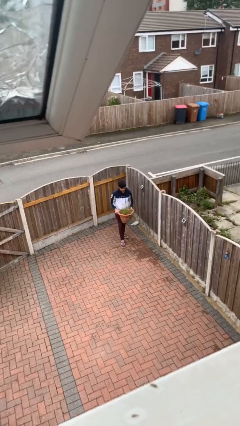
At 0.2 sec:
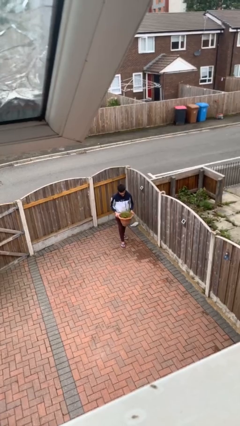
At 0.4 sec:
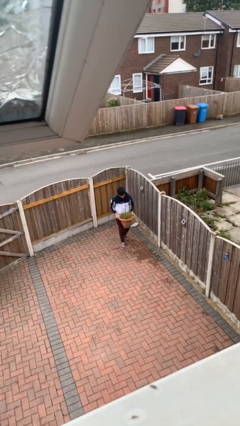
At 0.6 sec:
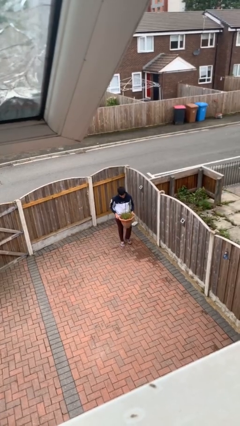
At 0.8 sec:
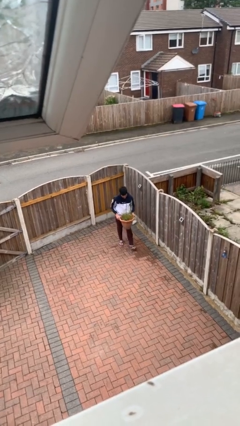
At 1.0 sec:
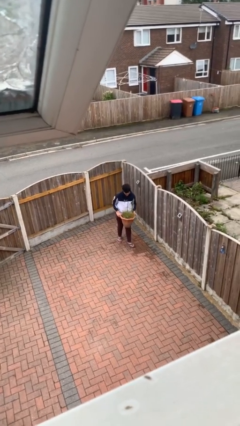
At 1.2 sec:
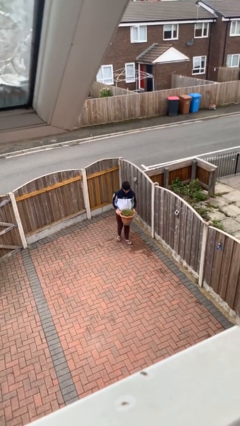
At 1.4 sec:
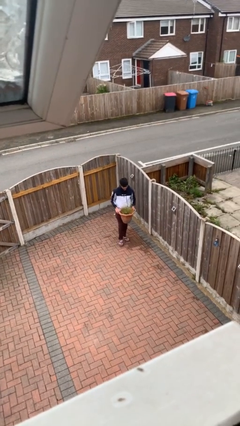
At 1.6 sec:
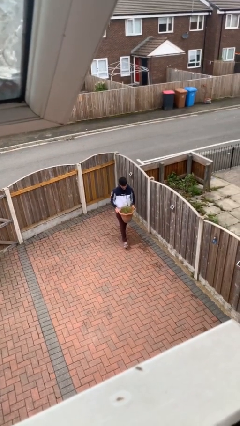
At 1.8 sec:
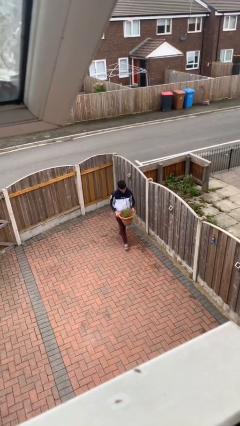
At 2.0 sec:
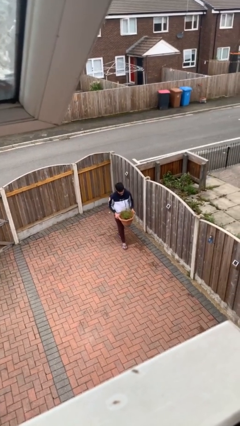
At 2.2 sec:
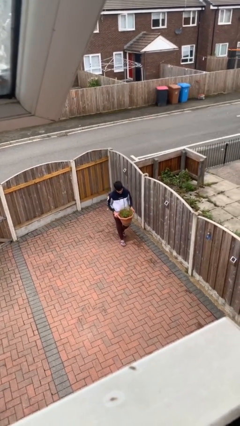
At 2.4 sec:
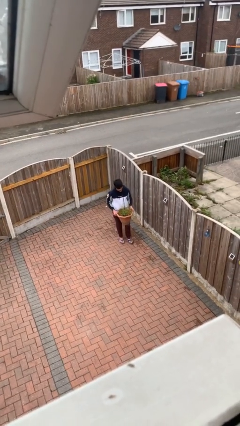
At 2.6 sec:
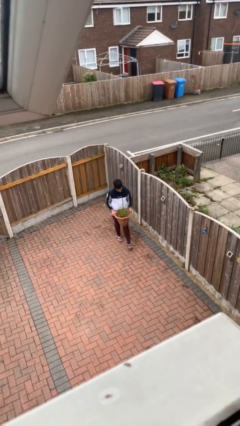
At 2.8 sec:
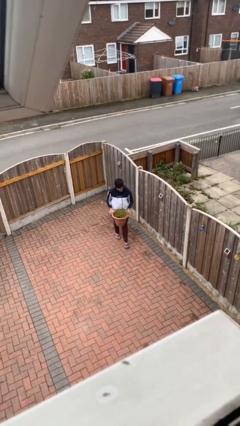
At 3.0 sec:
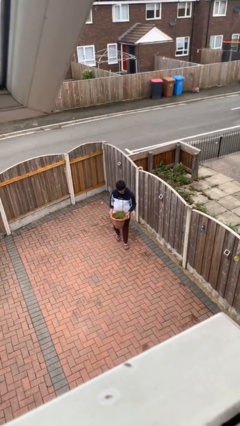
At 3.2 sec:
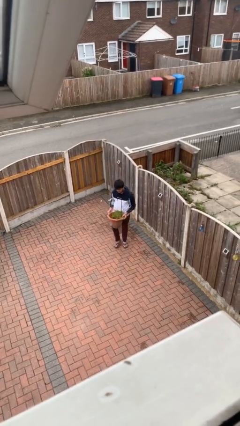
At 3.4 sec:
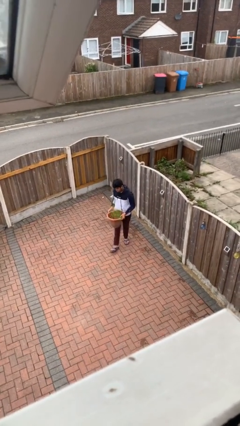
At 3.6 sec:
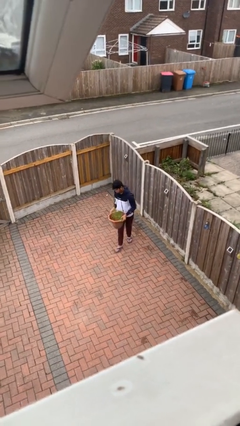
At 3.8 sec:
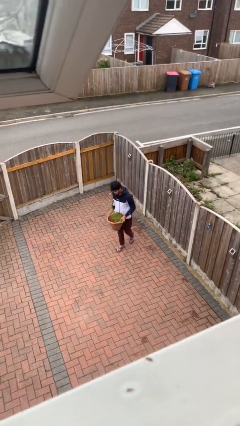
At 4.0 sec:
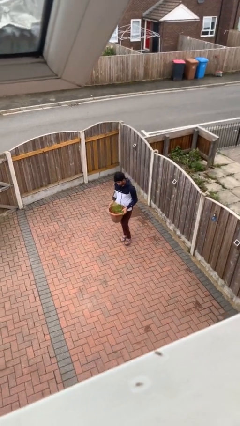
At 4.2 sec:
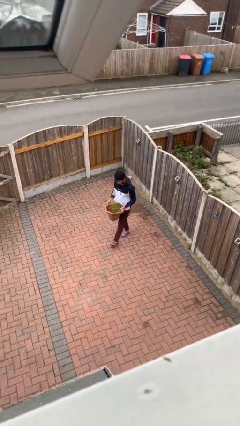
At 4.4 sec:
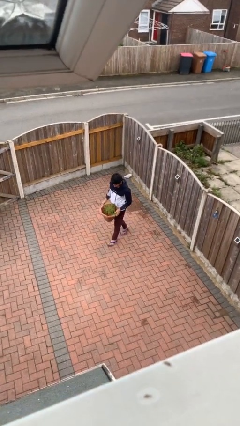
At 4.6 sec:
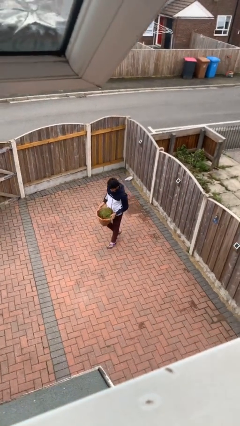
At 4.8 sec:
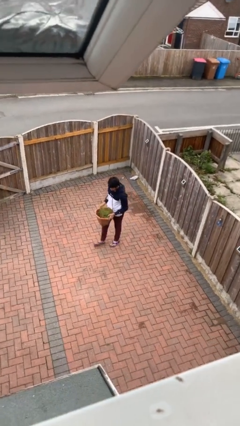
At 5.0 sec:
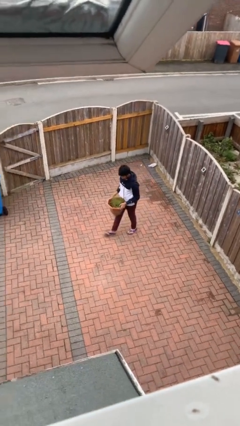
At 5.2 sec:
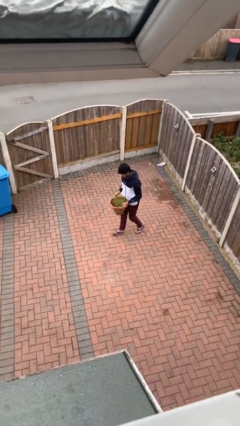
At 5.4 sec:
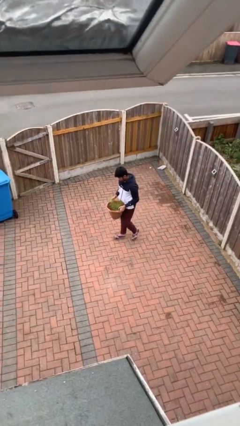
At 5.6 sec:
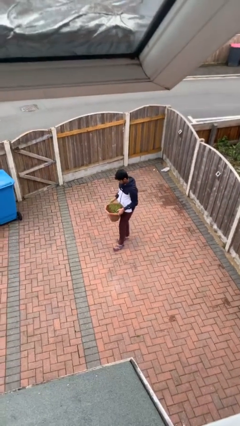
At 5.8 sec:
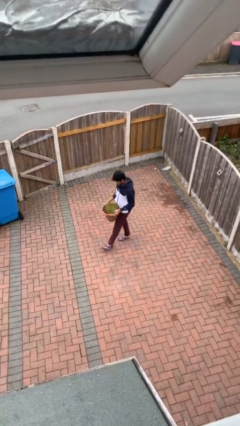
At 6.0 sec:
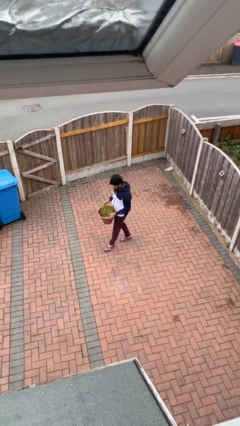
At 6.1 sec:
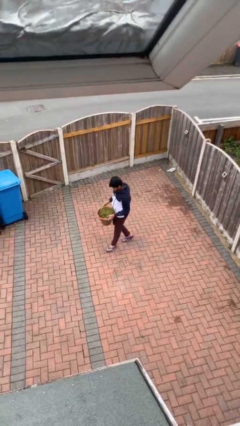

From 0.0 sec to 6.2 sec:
person carries heavy object

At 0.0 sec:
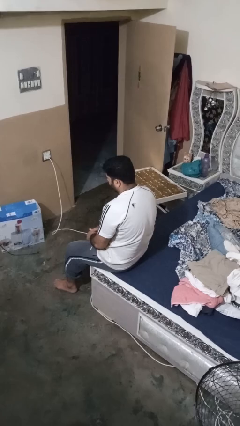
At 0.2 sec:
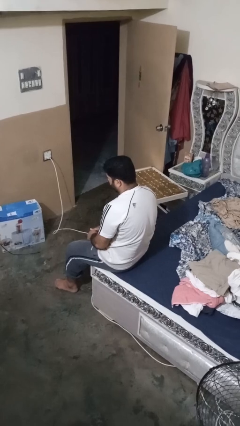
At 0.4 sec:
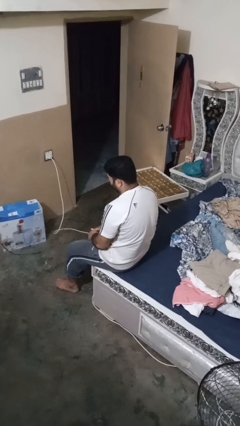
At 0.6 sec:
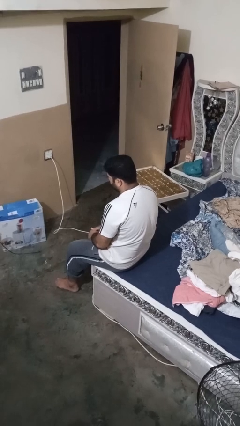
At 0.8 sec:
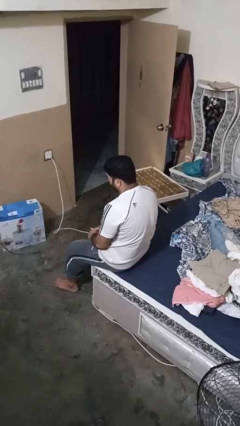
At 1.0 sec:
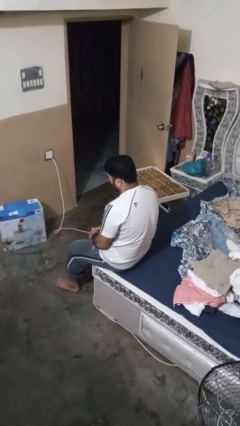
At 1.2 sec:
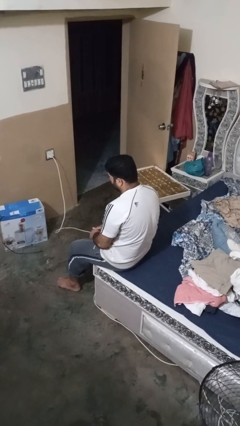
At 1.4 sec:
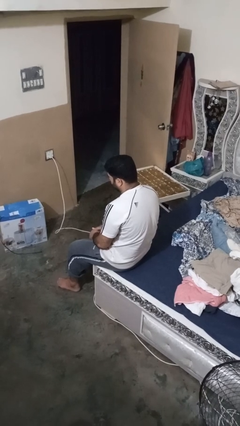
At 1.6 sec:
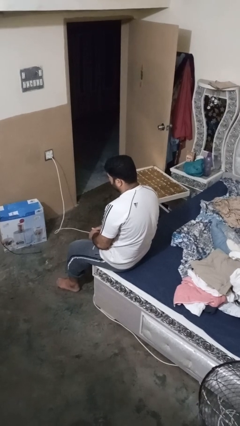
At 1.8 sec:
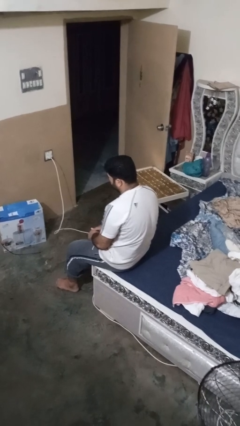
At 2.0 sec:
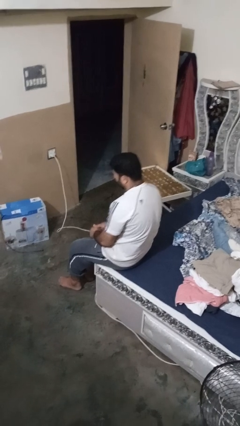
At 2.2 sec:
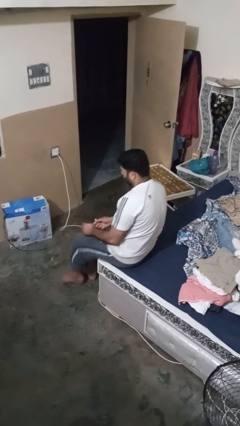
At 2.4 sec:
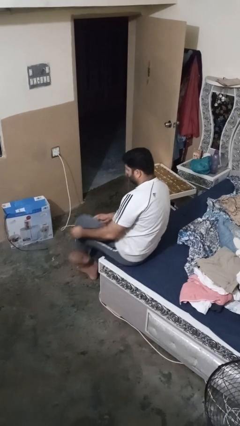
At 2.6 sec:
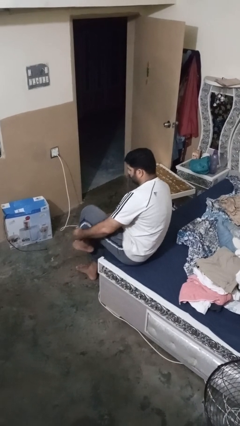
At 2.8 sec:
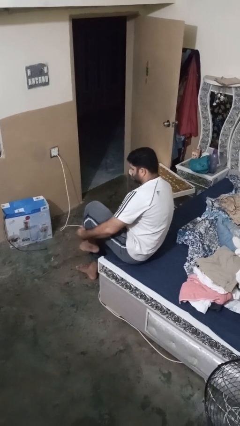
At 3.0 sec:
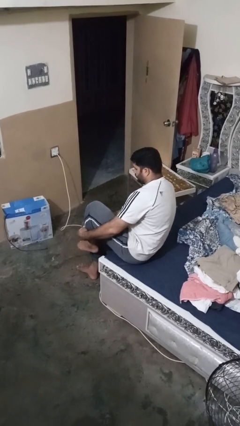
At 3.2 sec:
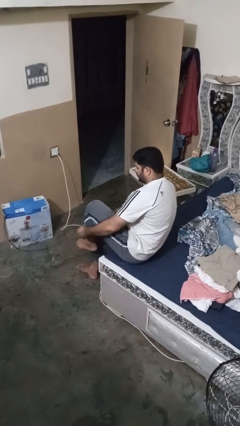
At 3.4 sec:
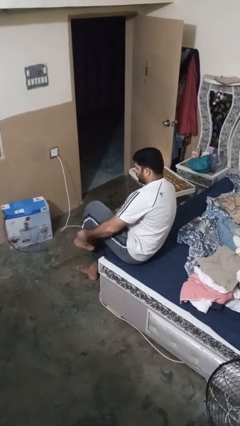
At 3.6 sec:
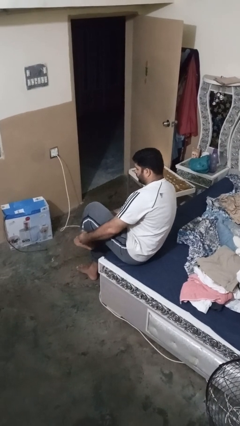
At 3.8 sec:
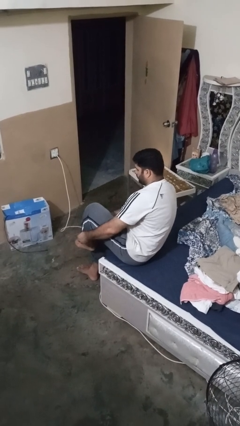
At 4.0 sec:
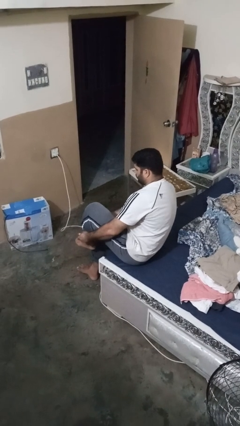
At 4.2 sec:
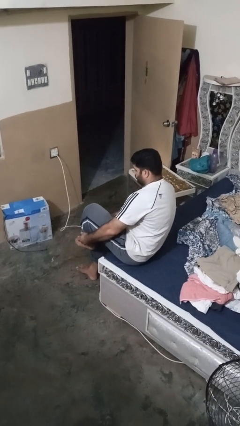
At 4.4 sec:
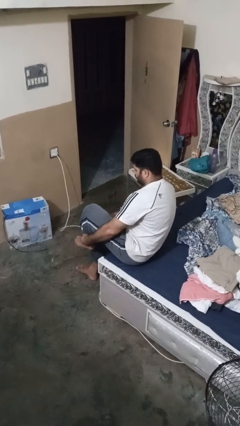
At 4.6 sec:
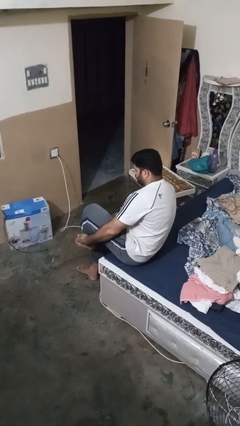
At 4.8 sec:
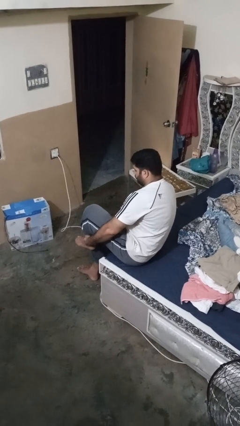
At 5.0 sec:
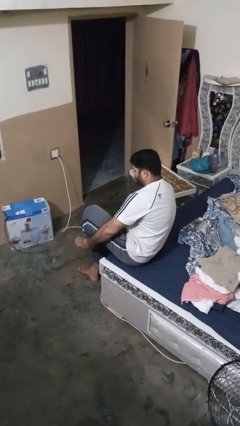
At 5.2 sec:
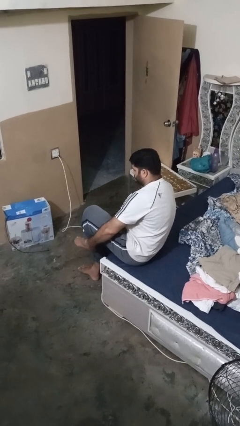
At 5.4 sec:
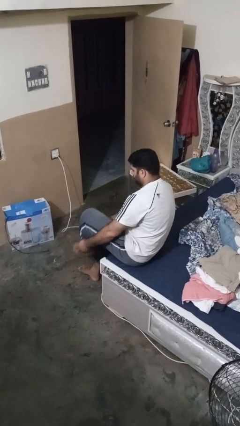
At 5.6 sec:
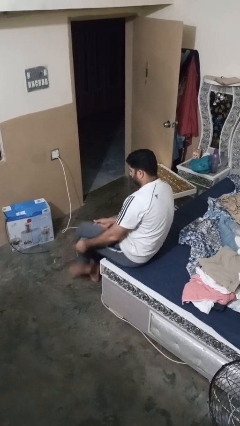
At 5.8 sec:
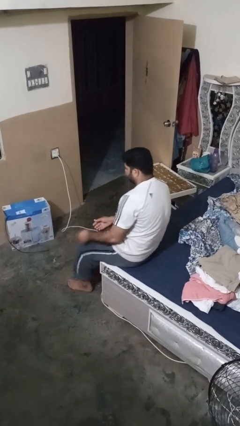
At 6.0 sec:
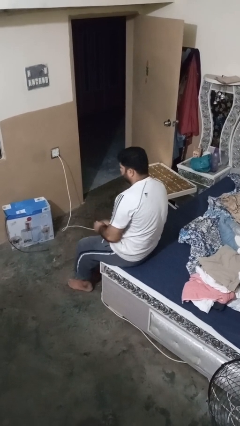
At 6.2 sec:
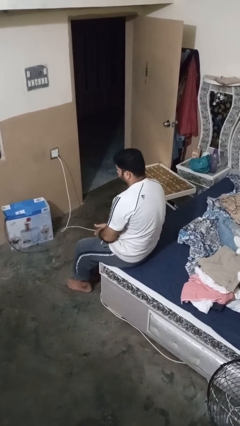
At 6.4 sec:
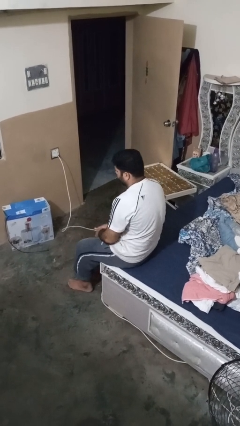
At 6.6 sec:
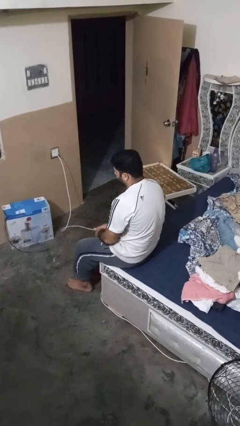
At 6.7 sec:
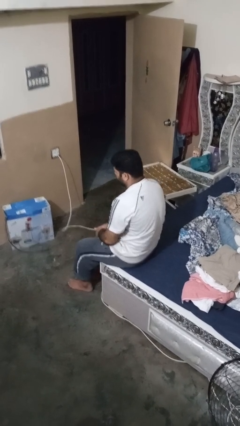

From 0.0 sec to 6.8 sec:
person hikes up pants

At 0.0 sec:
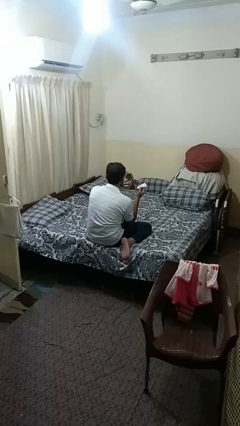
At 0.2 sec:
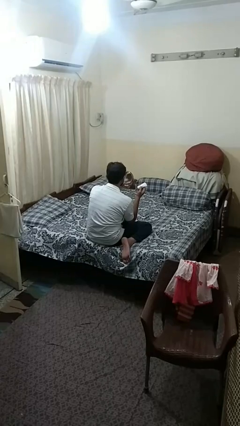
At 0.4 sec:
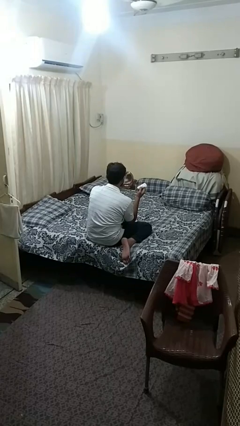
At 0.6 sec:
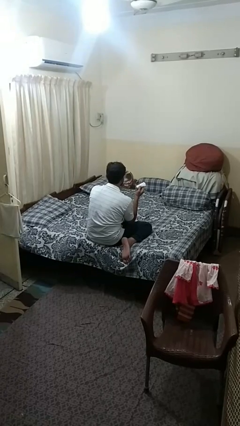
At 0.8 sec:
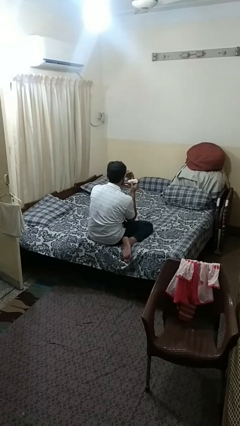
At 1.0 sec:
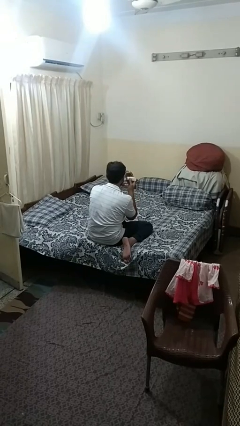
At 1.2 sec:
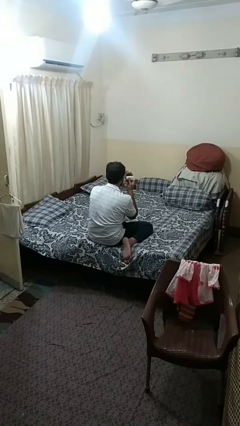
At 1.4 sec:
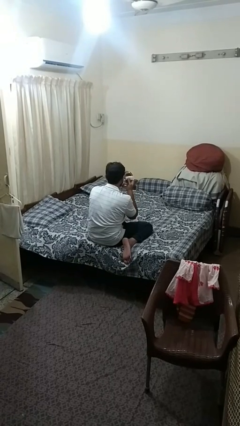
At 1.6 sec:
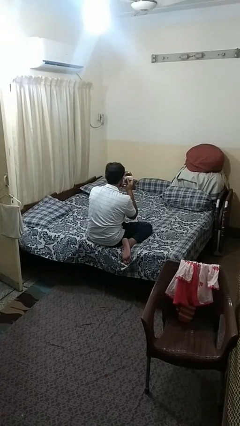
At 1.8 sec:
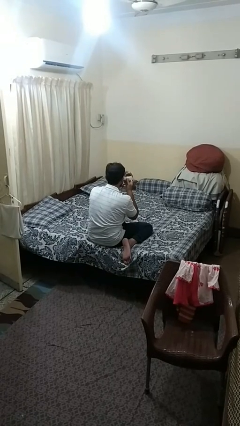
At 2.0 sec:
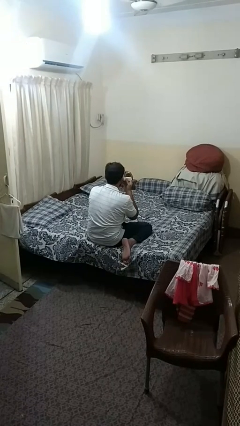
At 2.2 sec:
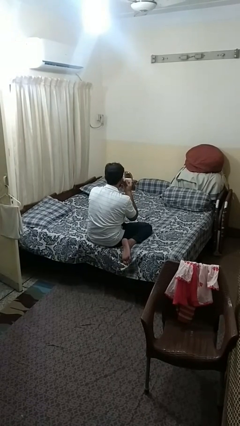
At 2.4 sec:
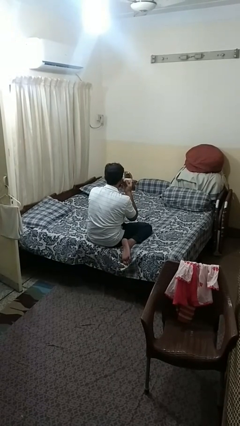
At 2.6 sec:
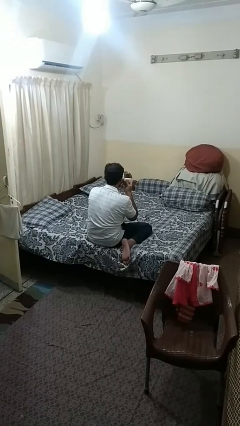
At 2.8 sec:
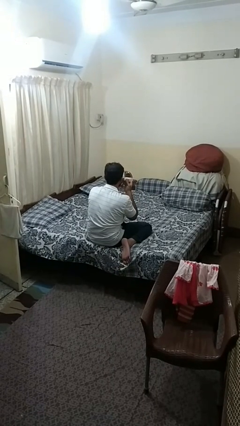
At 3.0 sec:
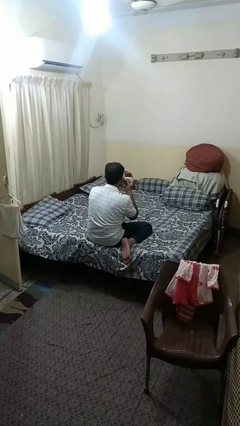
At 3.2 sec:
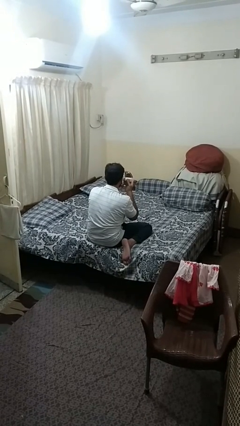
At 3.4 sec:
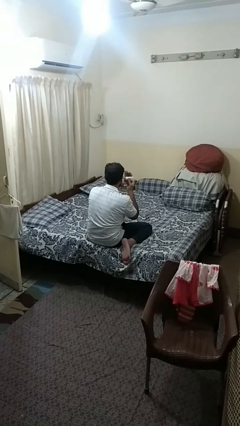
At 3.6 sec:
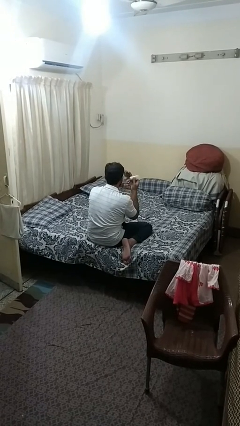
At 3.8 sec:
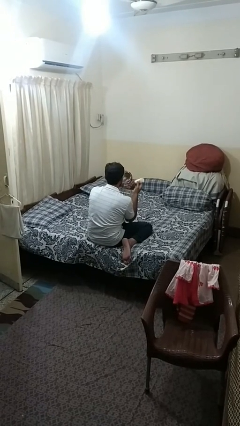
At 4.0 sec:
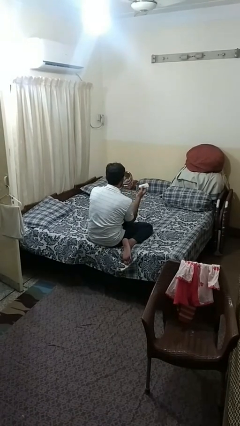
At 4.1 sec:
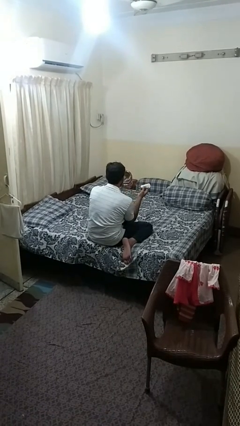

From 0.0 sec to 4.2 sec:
person applies foundation makeup

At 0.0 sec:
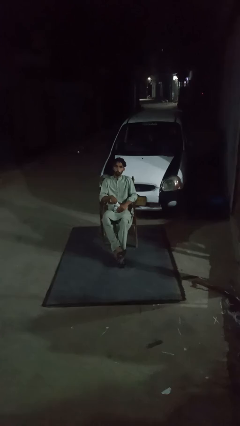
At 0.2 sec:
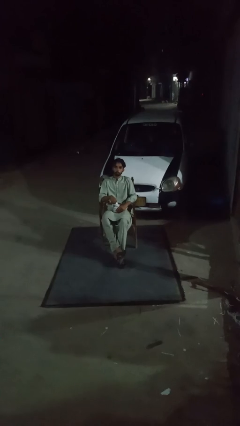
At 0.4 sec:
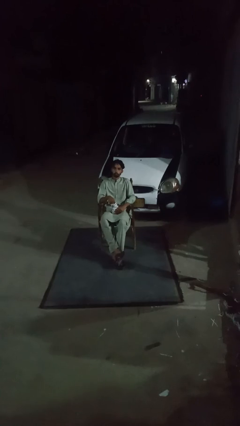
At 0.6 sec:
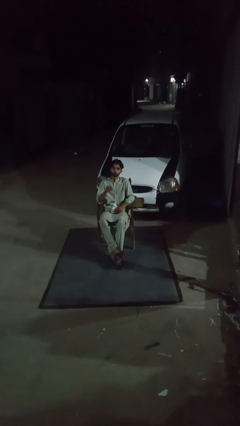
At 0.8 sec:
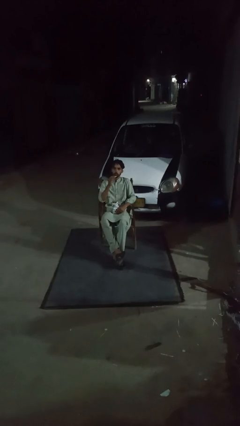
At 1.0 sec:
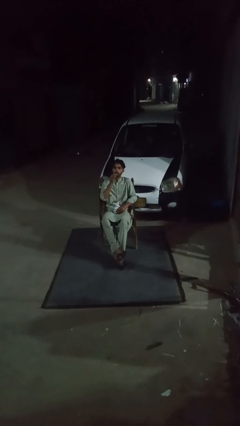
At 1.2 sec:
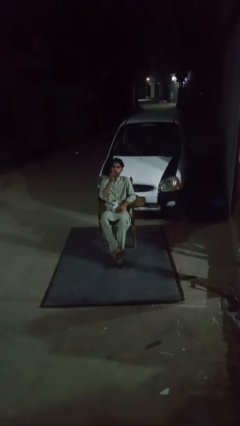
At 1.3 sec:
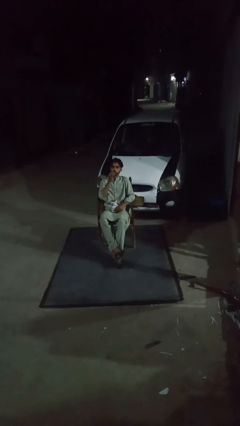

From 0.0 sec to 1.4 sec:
person eats snack from bag
